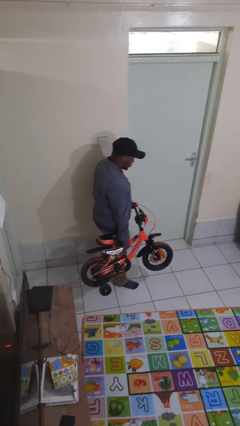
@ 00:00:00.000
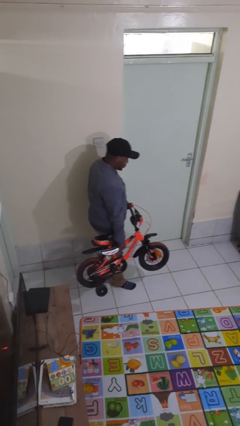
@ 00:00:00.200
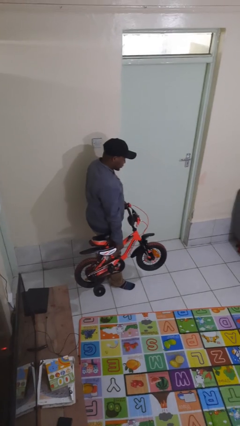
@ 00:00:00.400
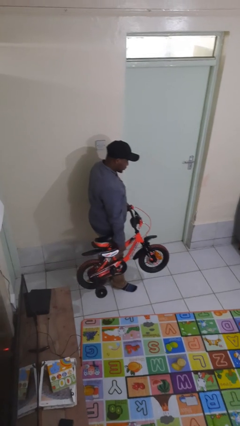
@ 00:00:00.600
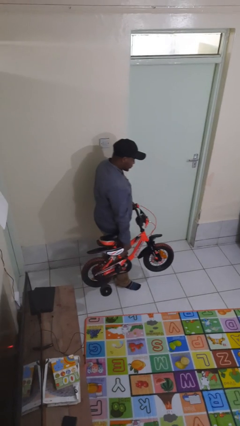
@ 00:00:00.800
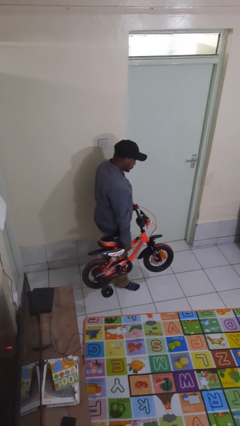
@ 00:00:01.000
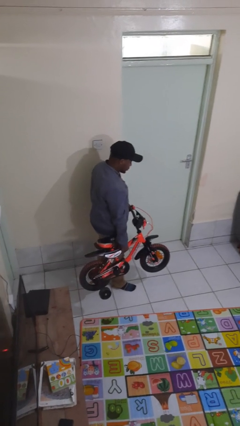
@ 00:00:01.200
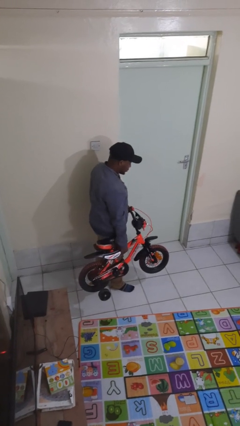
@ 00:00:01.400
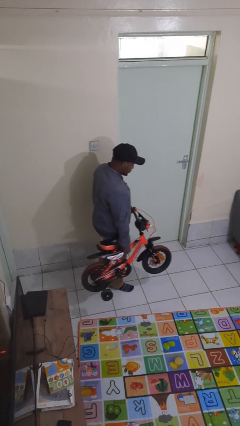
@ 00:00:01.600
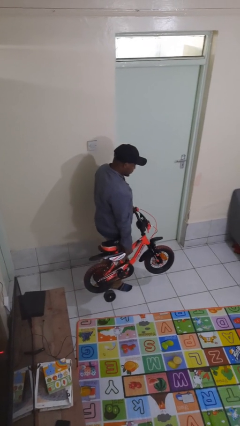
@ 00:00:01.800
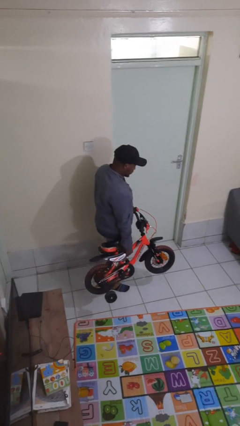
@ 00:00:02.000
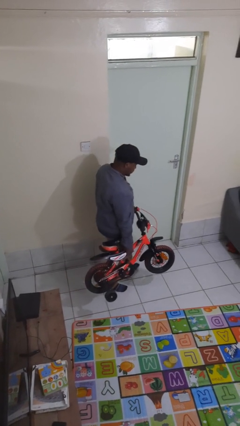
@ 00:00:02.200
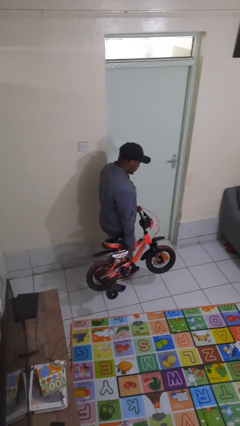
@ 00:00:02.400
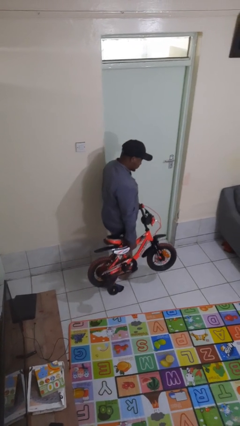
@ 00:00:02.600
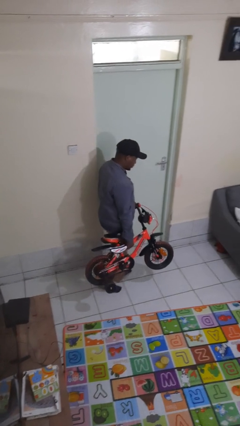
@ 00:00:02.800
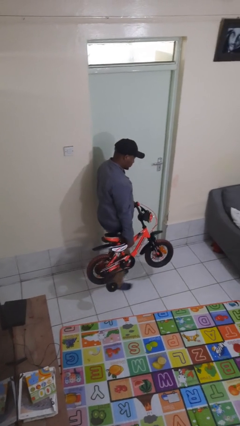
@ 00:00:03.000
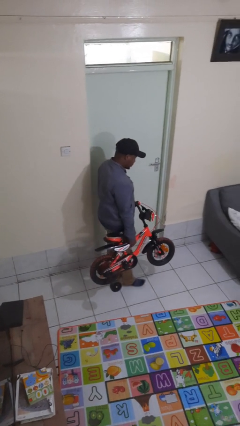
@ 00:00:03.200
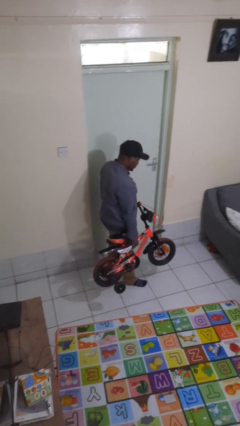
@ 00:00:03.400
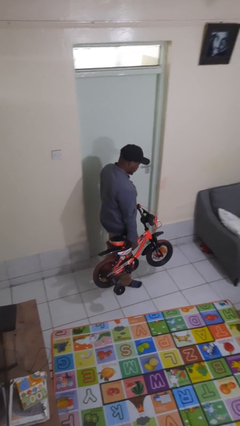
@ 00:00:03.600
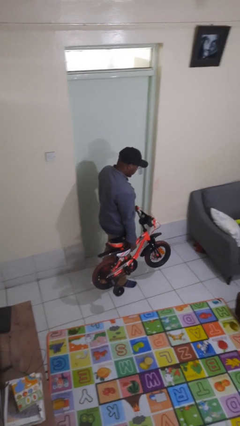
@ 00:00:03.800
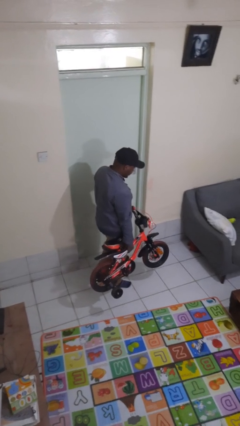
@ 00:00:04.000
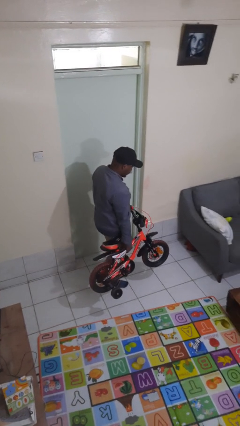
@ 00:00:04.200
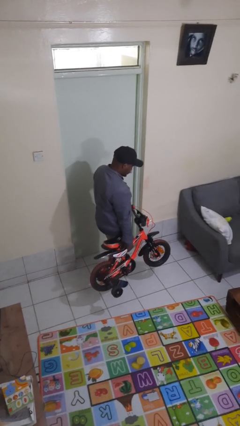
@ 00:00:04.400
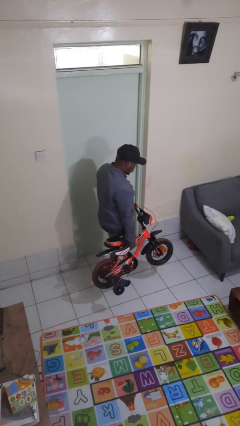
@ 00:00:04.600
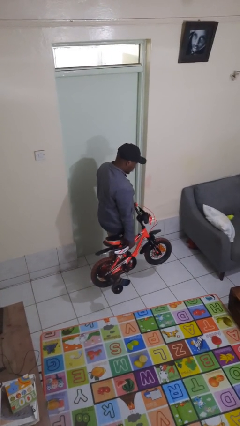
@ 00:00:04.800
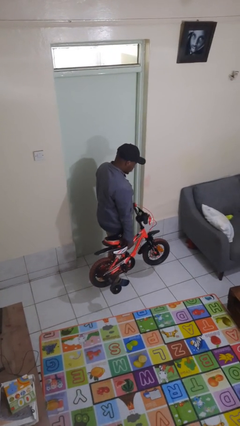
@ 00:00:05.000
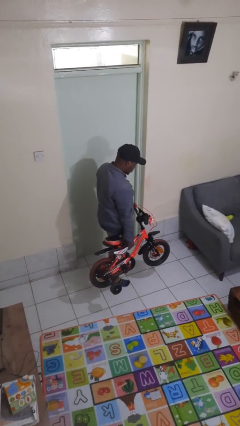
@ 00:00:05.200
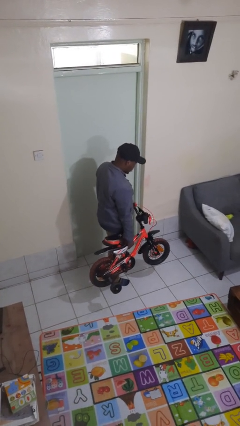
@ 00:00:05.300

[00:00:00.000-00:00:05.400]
person carries bicycle

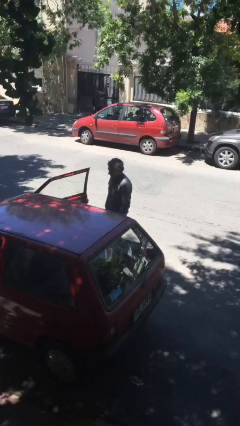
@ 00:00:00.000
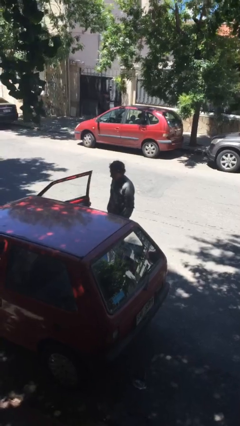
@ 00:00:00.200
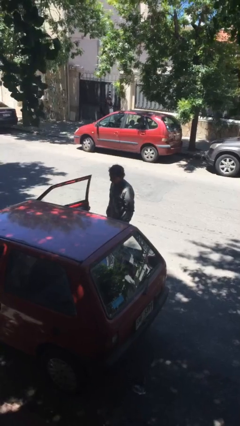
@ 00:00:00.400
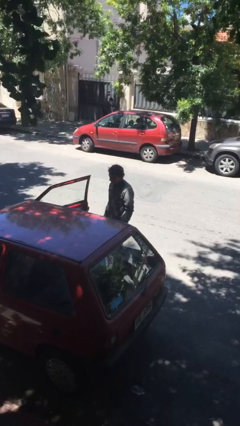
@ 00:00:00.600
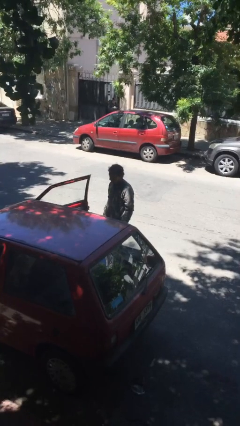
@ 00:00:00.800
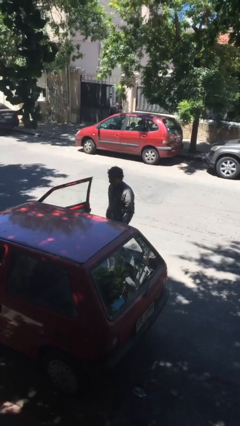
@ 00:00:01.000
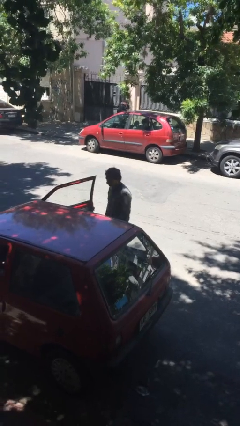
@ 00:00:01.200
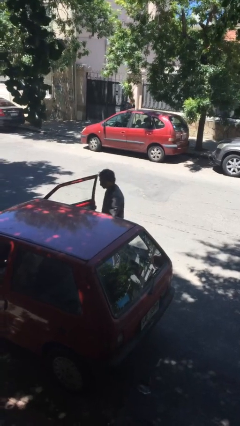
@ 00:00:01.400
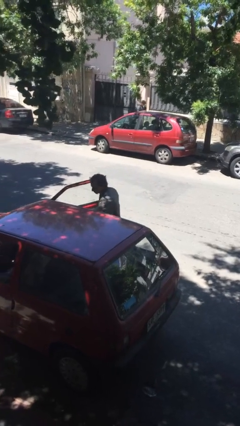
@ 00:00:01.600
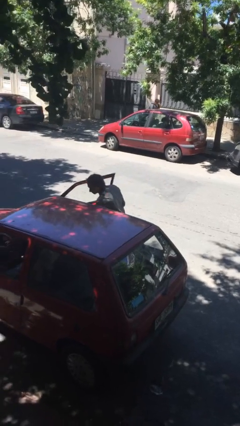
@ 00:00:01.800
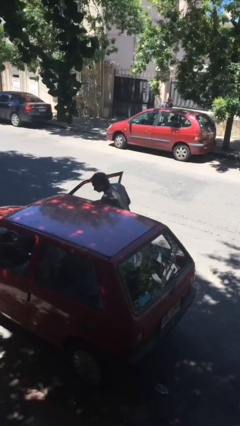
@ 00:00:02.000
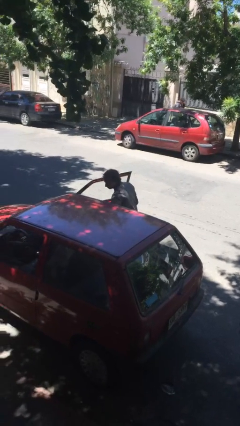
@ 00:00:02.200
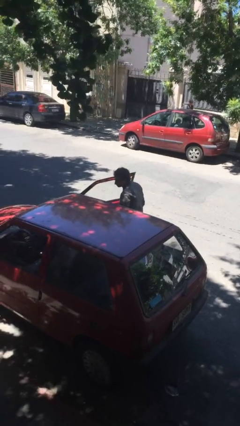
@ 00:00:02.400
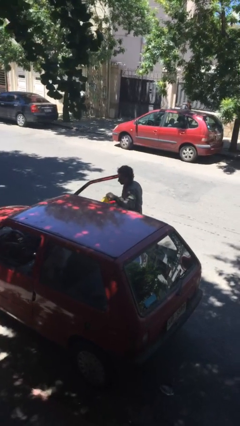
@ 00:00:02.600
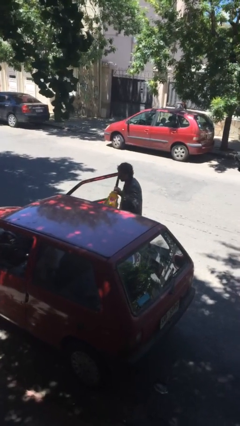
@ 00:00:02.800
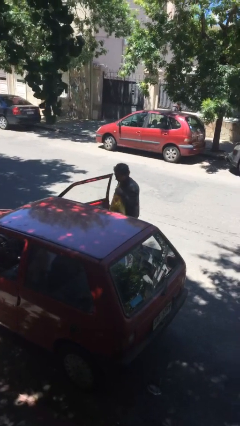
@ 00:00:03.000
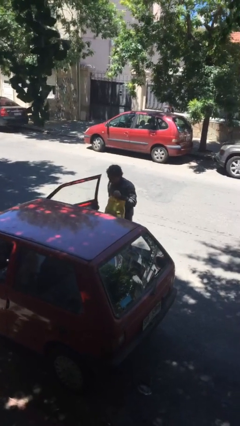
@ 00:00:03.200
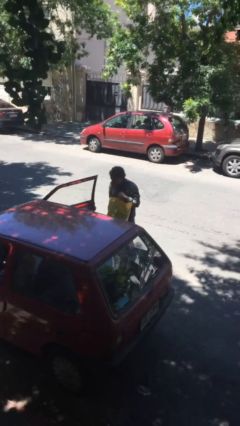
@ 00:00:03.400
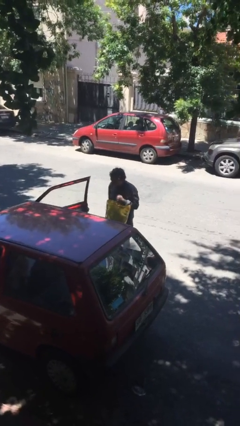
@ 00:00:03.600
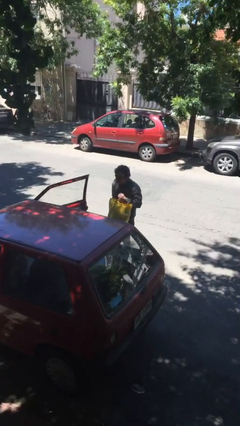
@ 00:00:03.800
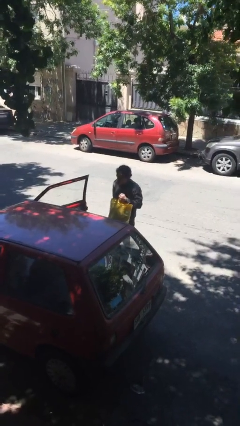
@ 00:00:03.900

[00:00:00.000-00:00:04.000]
person unloads car

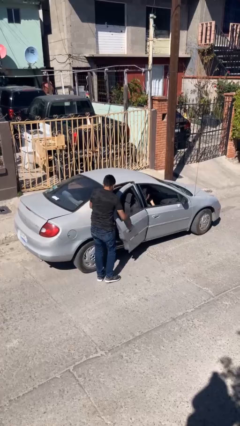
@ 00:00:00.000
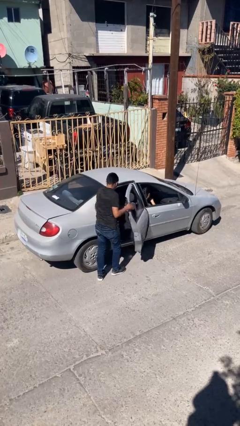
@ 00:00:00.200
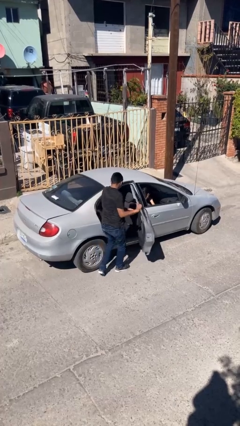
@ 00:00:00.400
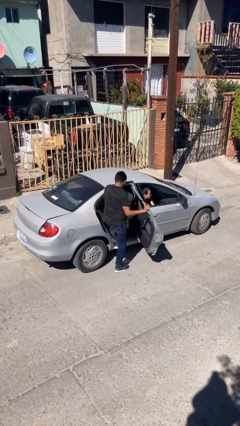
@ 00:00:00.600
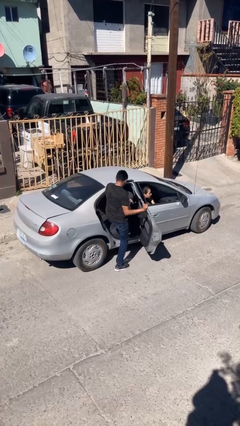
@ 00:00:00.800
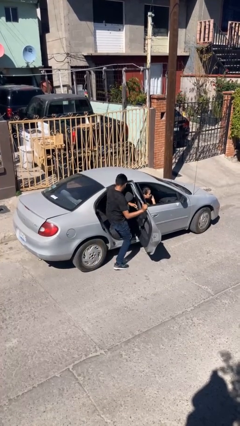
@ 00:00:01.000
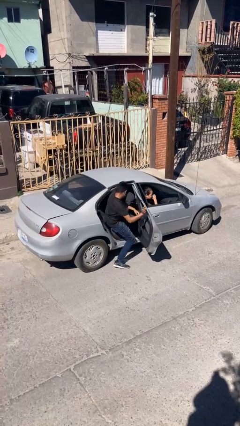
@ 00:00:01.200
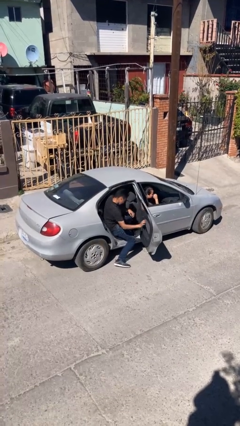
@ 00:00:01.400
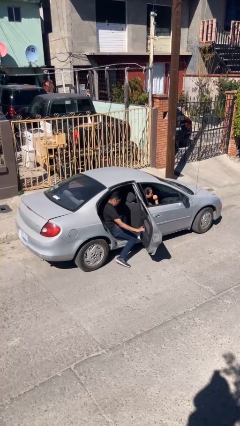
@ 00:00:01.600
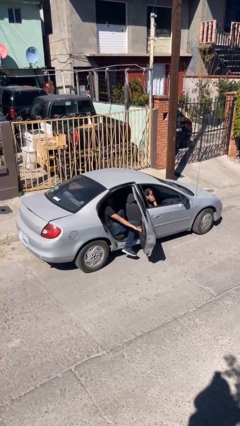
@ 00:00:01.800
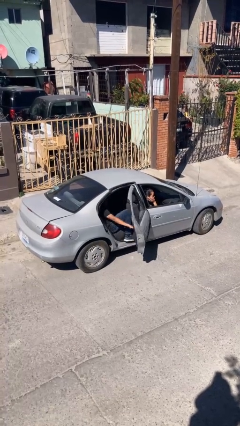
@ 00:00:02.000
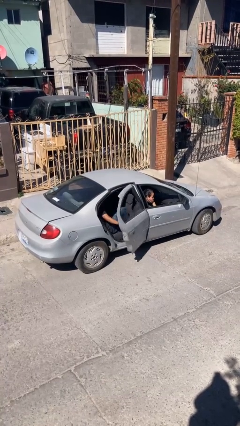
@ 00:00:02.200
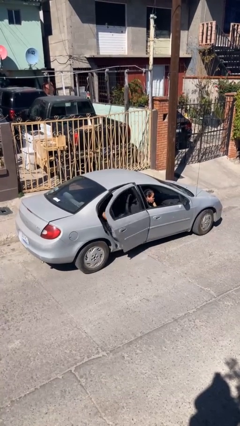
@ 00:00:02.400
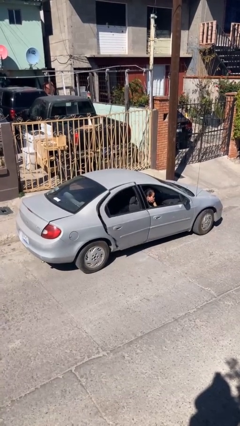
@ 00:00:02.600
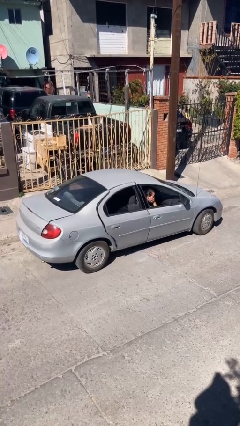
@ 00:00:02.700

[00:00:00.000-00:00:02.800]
car picks up person

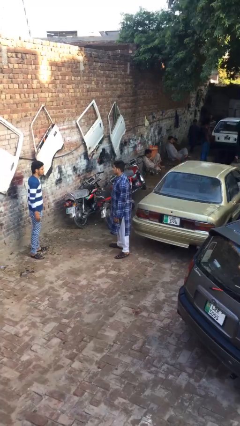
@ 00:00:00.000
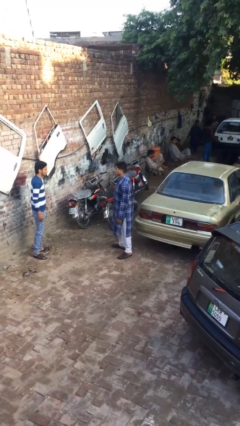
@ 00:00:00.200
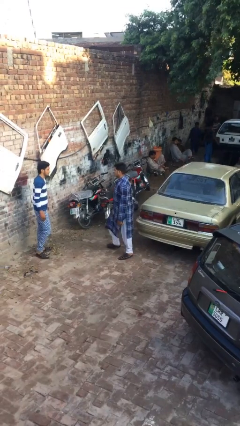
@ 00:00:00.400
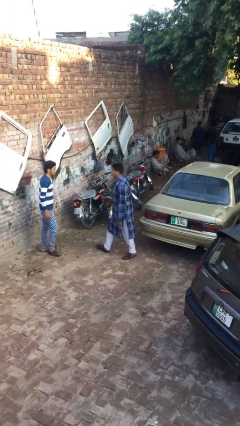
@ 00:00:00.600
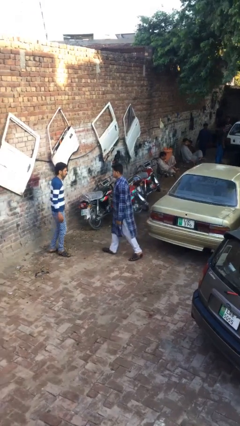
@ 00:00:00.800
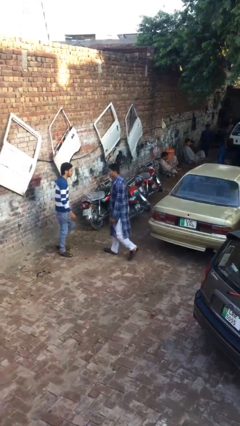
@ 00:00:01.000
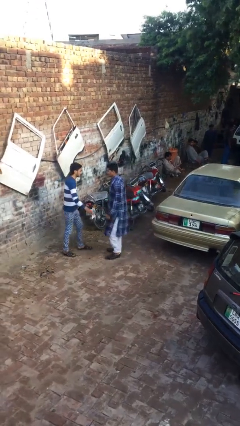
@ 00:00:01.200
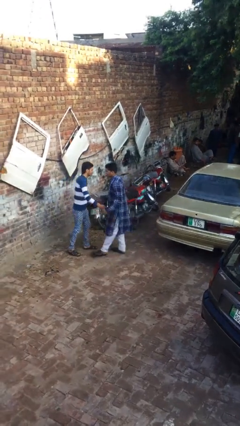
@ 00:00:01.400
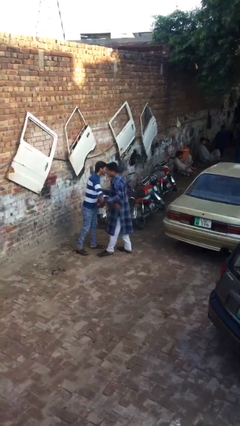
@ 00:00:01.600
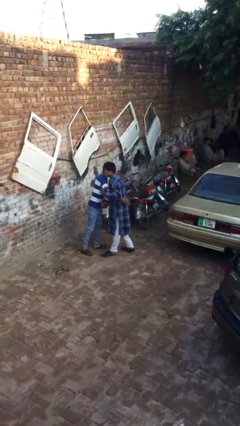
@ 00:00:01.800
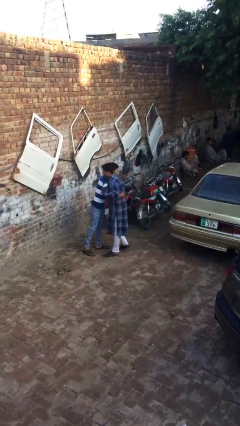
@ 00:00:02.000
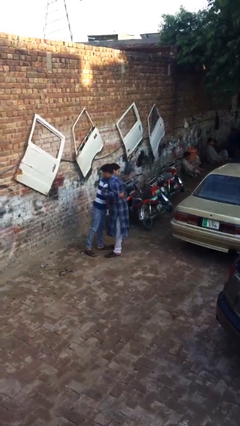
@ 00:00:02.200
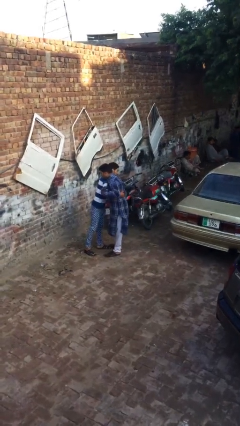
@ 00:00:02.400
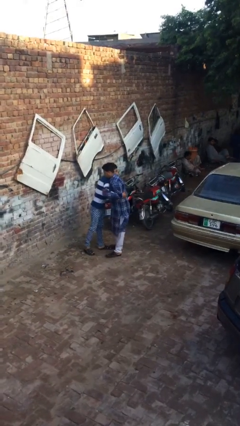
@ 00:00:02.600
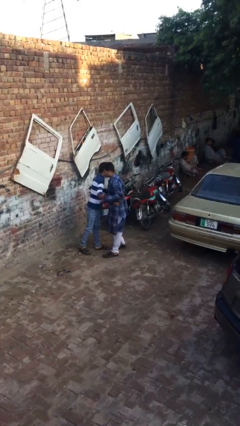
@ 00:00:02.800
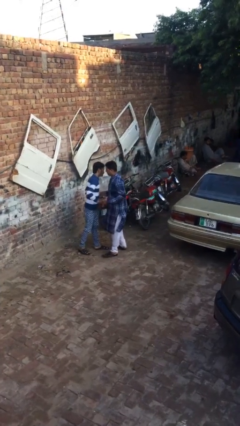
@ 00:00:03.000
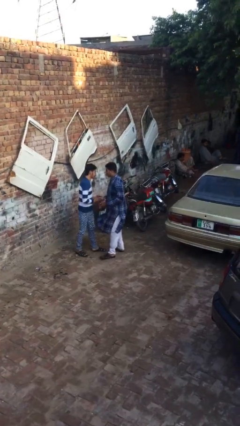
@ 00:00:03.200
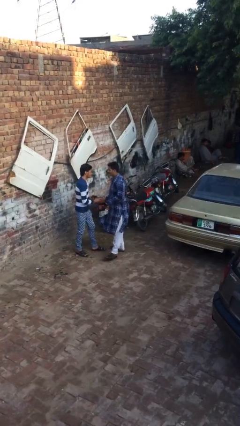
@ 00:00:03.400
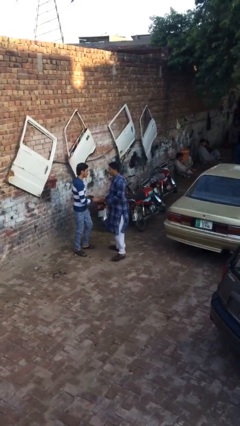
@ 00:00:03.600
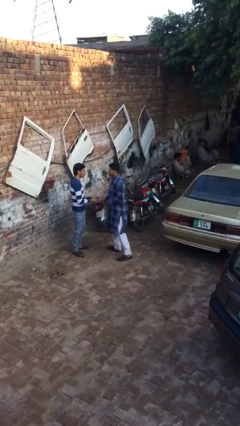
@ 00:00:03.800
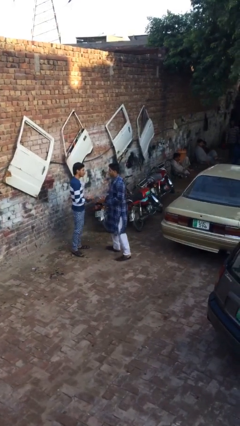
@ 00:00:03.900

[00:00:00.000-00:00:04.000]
person embraces person

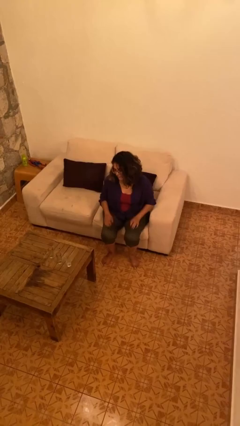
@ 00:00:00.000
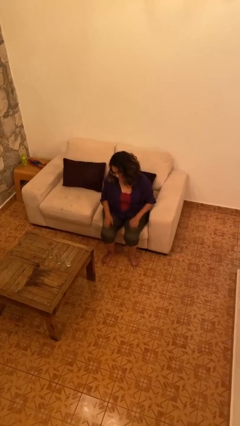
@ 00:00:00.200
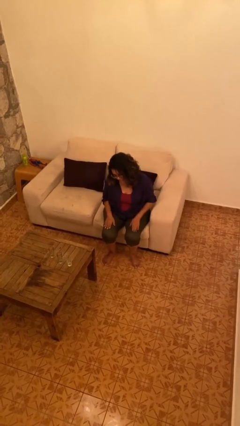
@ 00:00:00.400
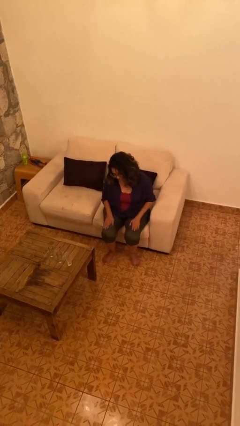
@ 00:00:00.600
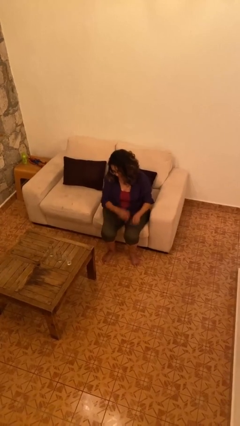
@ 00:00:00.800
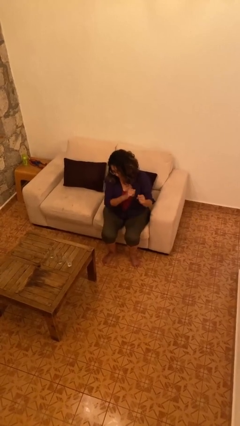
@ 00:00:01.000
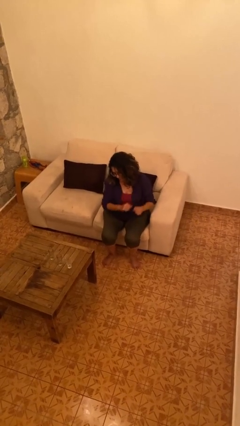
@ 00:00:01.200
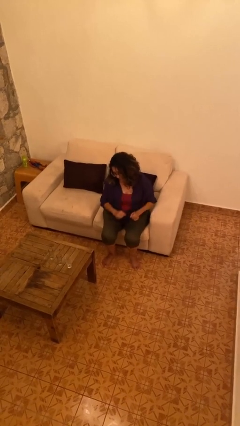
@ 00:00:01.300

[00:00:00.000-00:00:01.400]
person slaps hands on thighs
